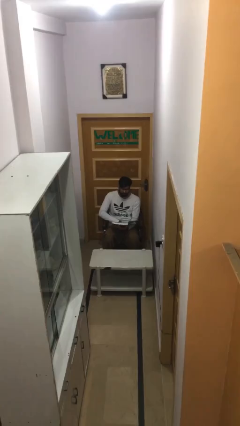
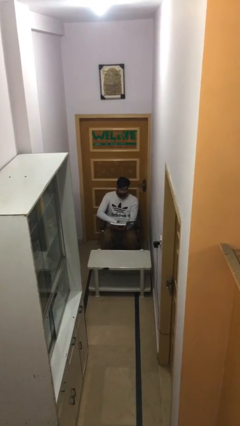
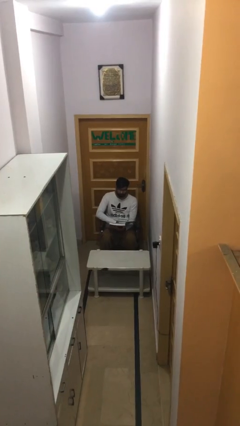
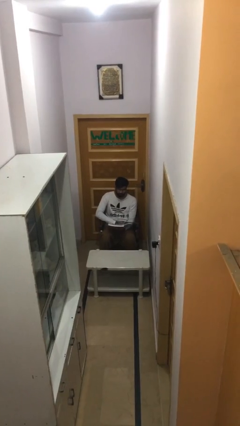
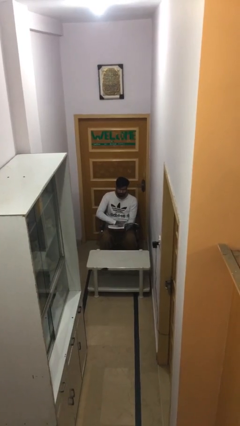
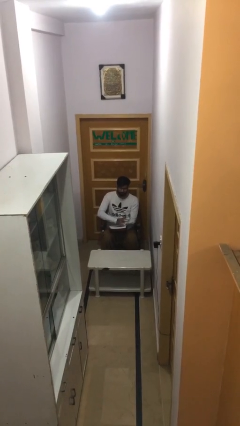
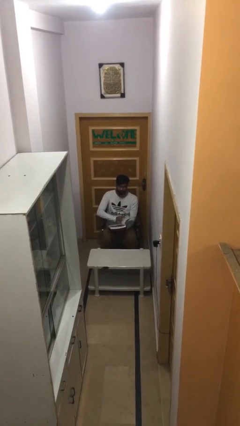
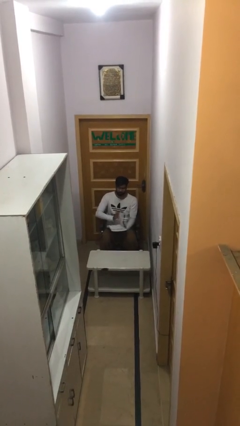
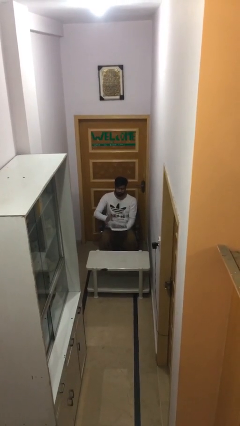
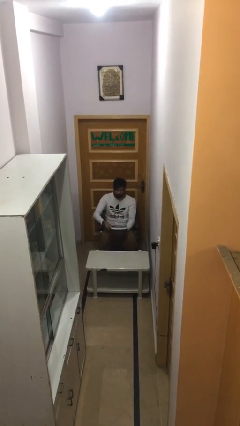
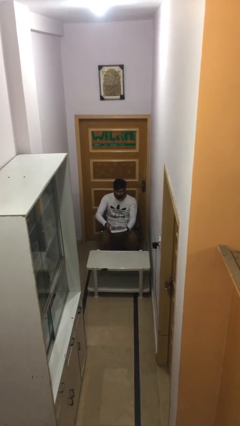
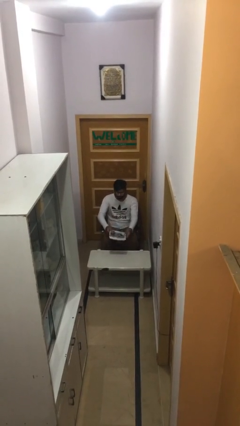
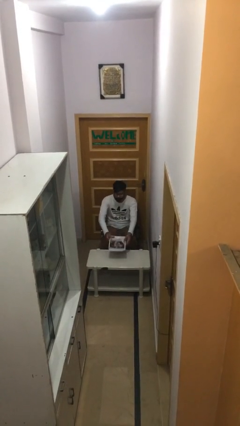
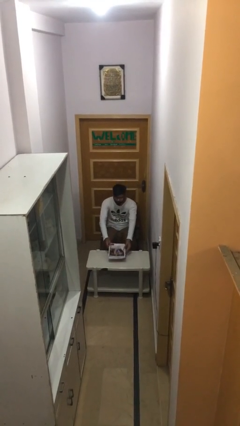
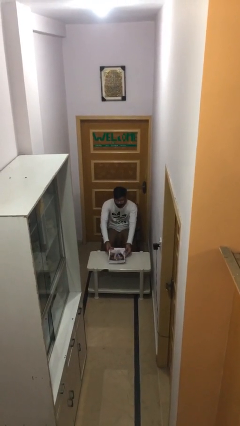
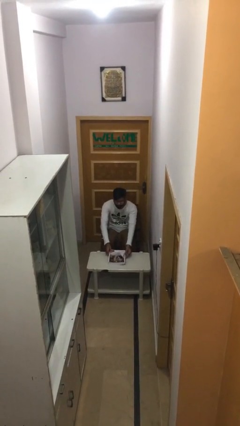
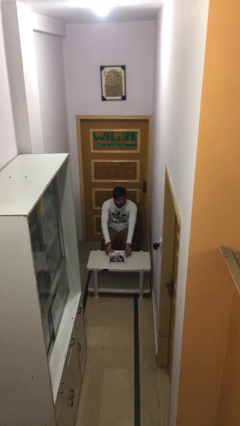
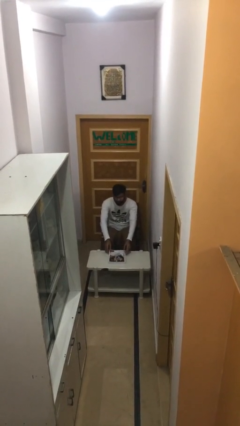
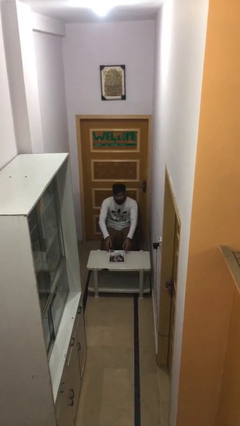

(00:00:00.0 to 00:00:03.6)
person puts down object on table

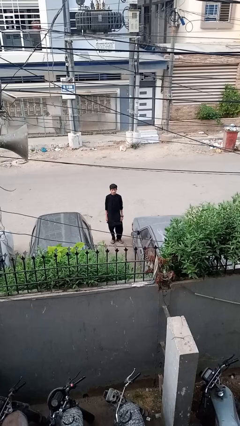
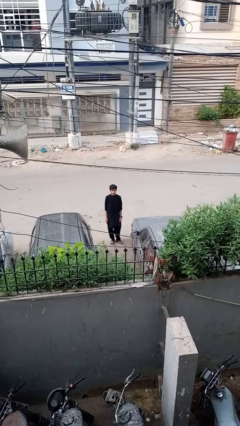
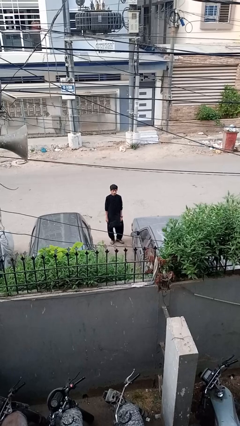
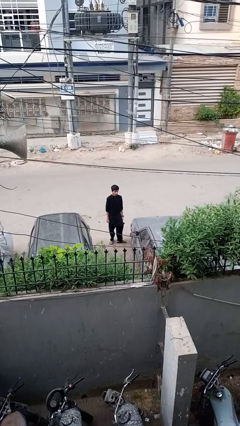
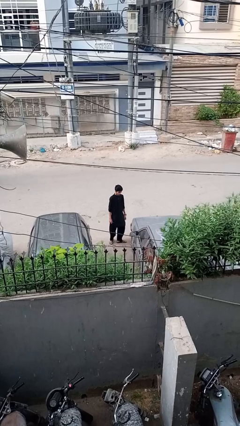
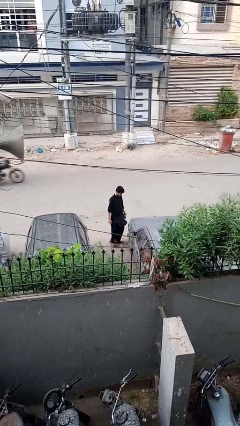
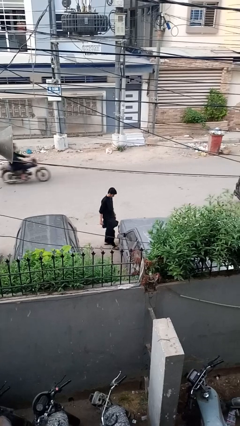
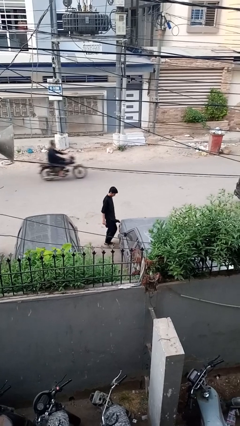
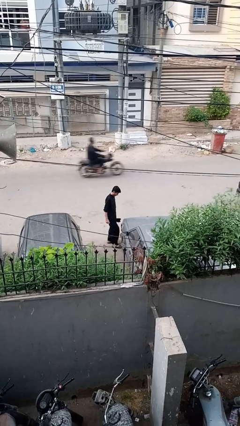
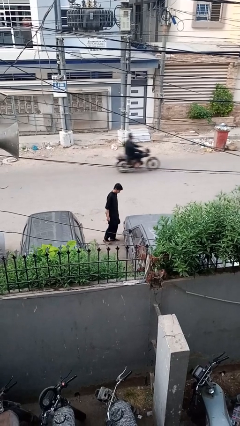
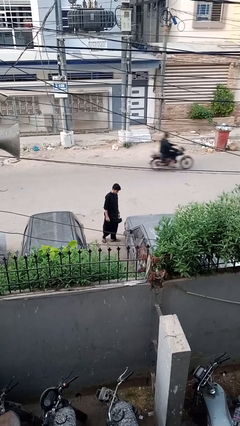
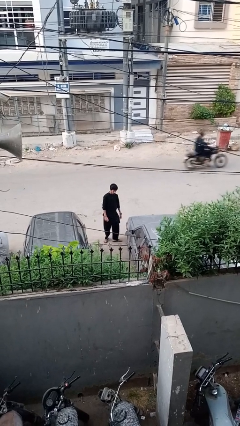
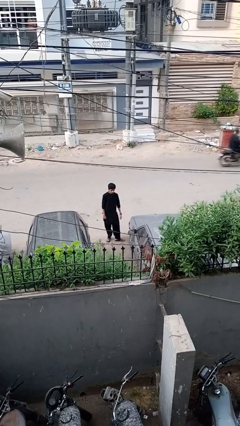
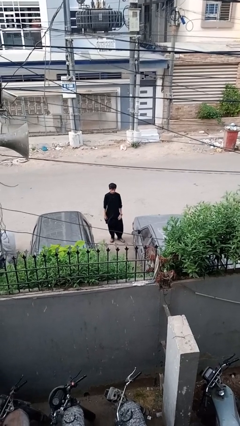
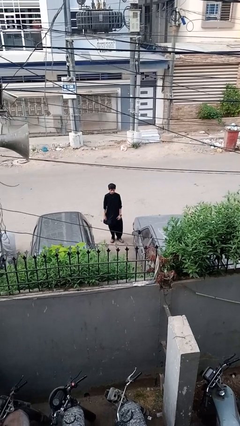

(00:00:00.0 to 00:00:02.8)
person kicks car tires

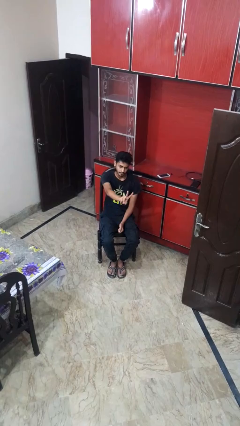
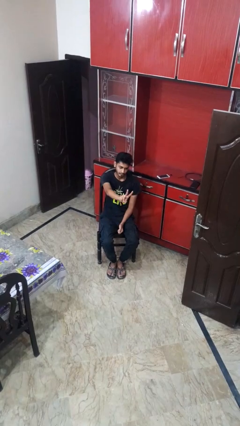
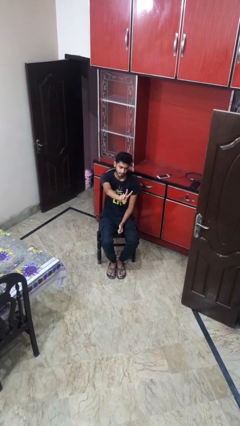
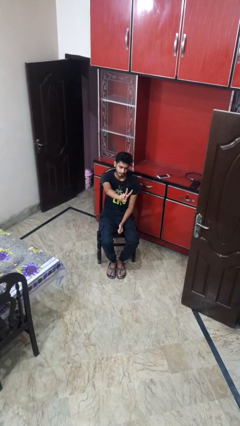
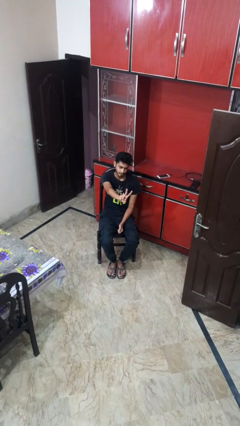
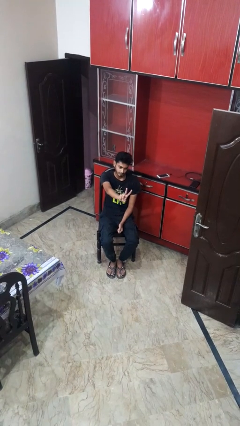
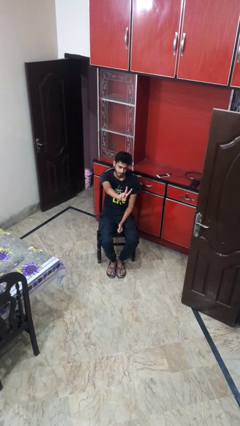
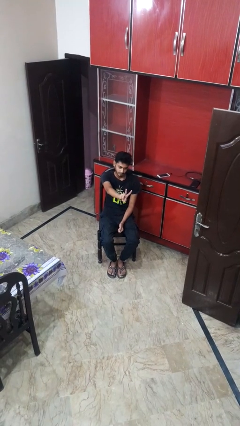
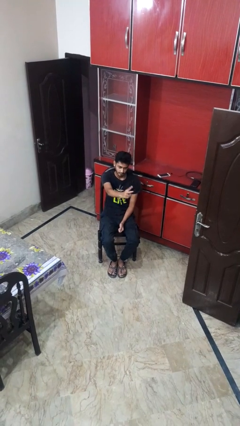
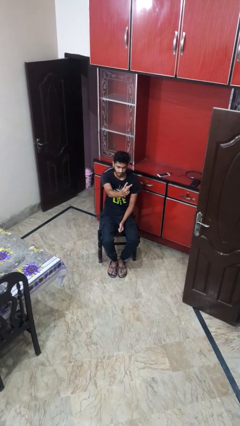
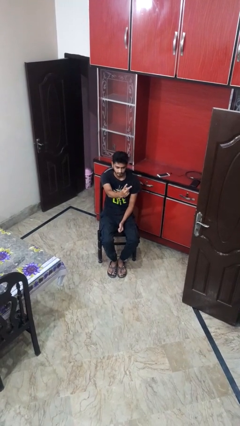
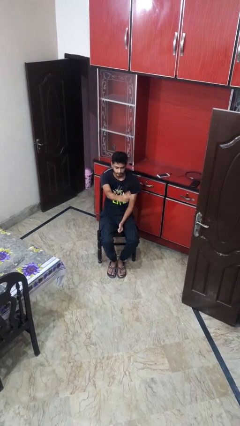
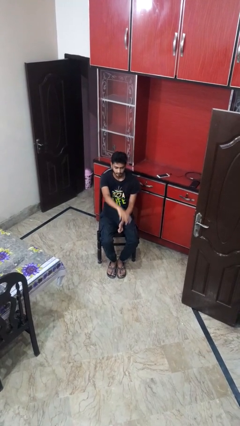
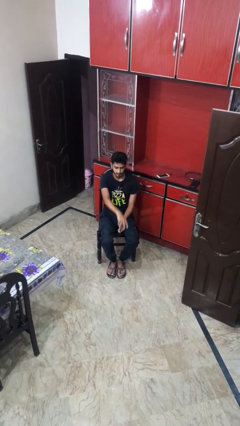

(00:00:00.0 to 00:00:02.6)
person gestures peace

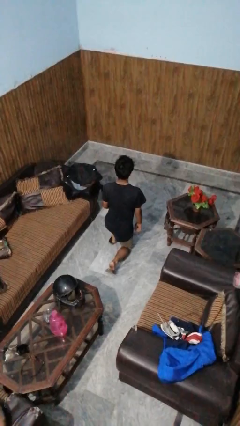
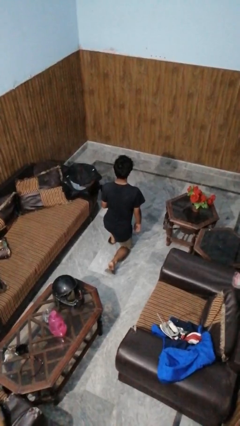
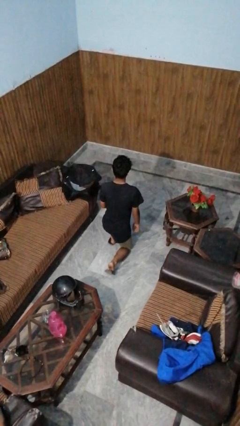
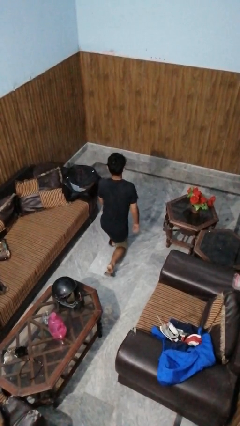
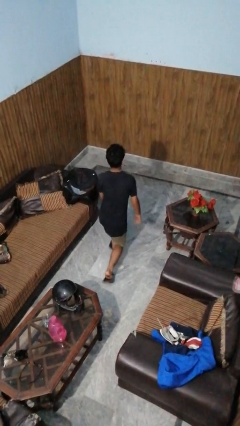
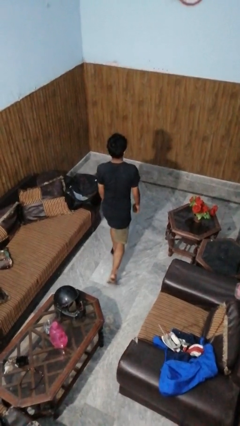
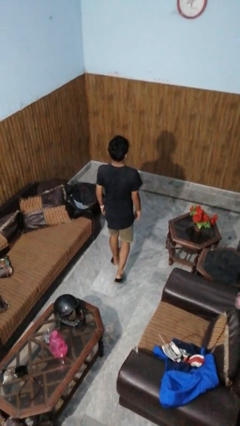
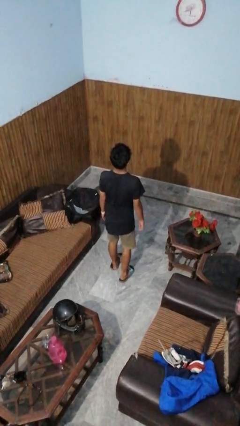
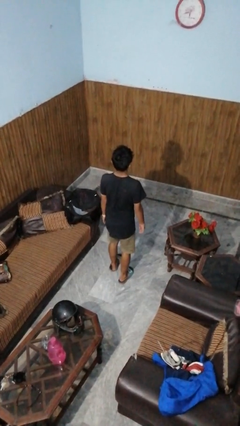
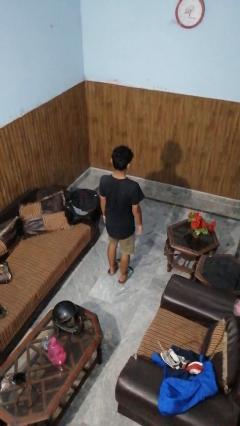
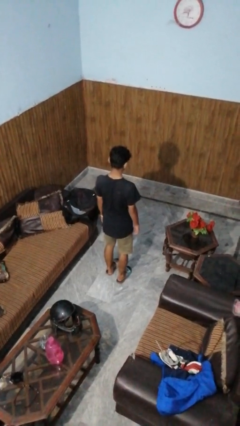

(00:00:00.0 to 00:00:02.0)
person stands up from floor

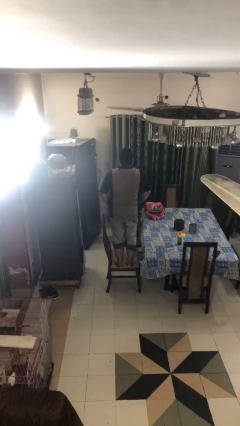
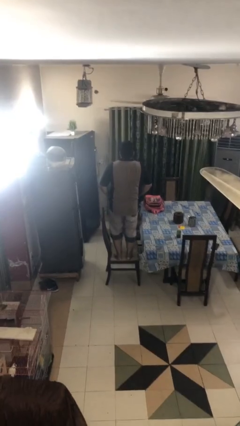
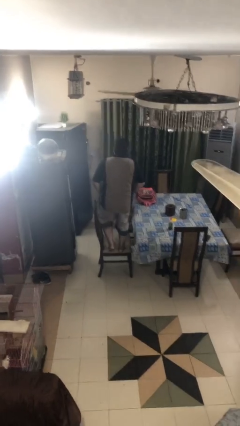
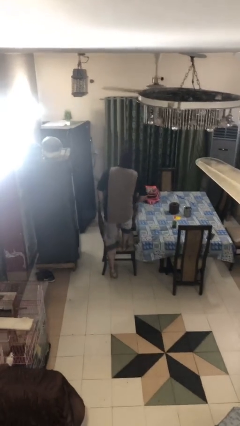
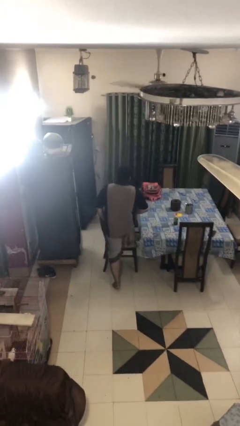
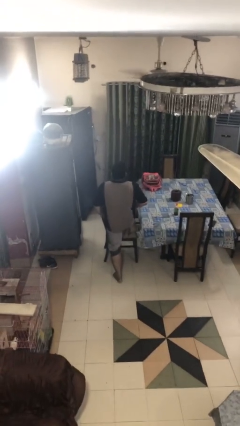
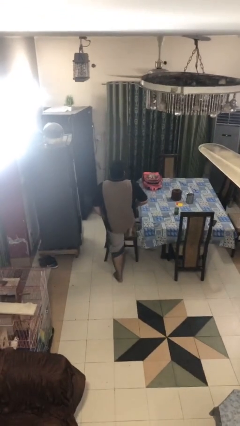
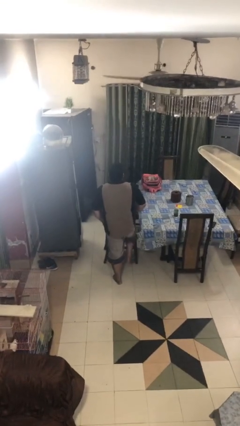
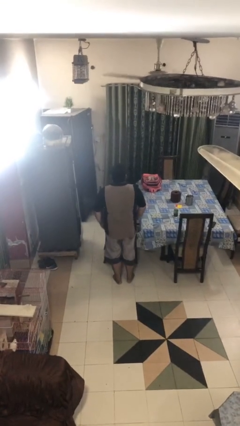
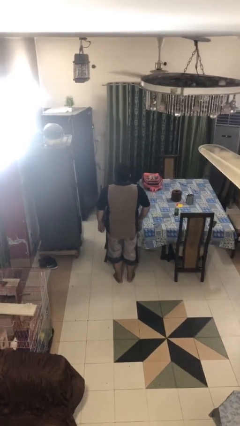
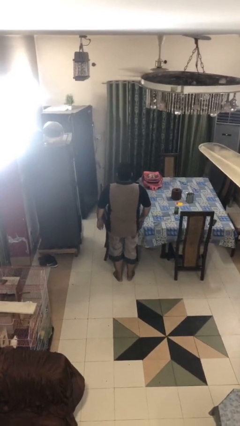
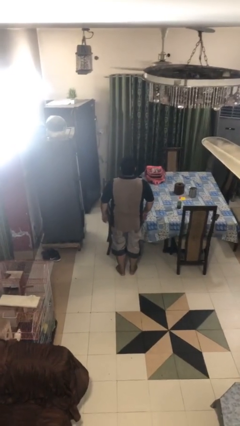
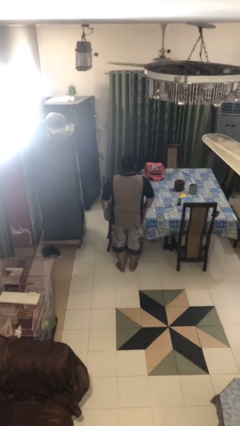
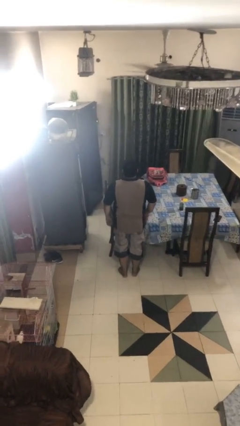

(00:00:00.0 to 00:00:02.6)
person climbs off chair

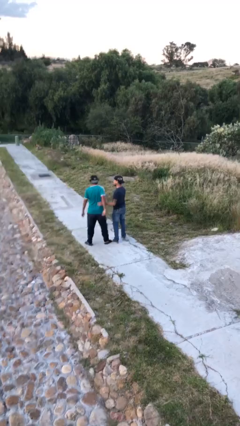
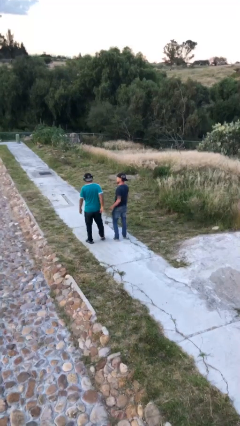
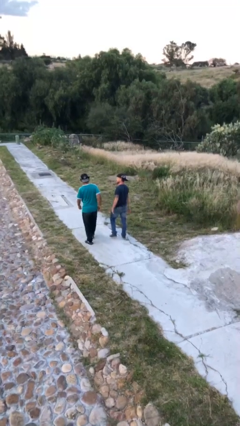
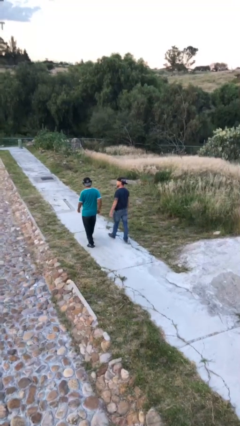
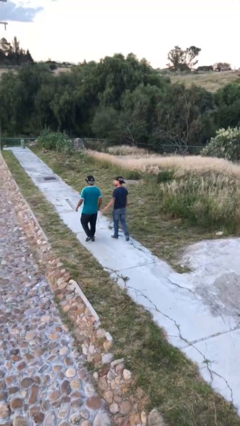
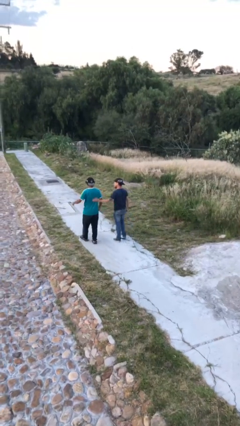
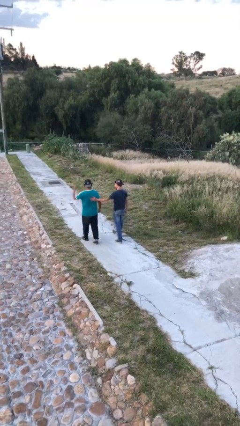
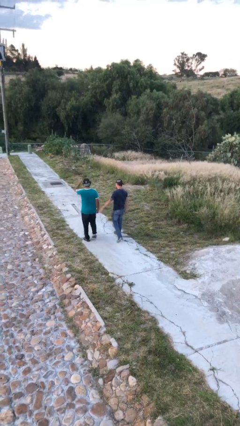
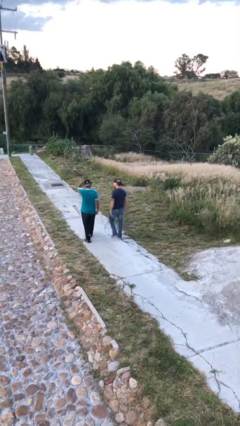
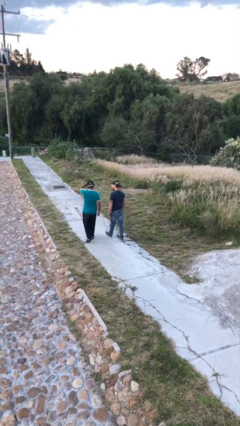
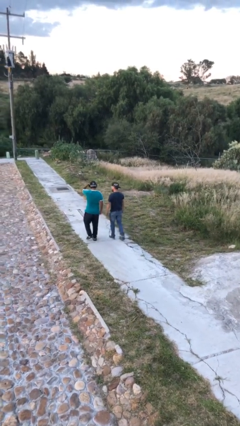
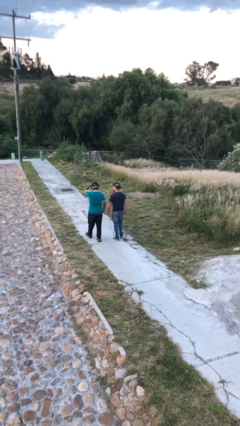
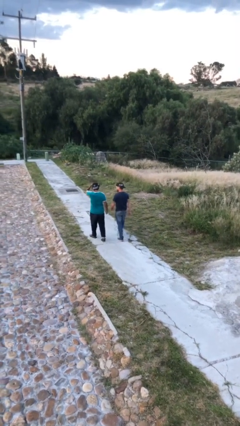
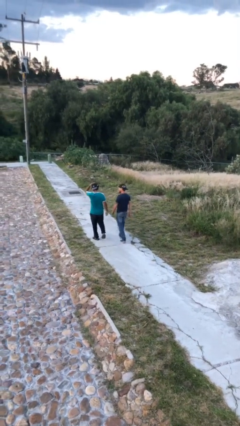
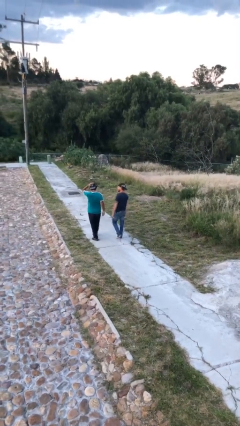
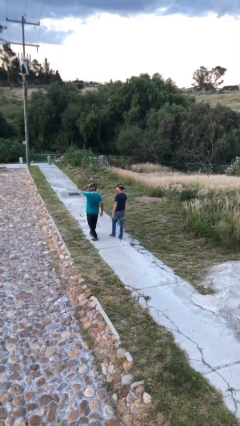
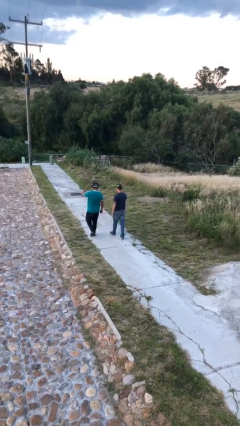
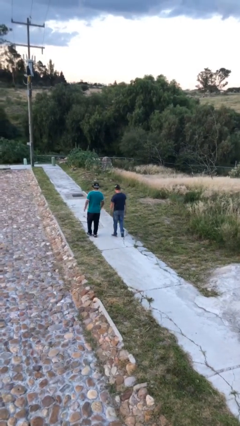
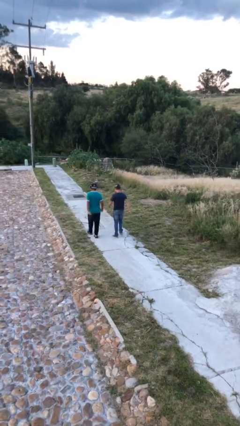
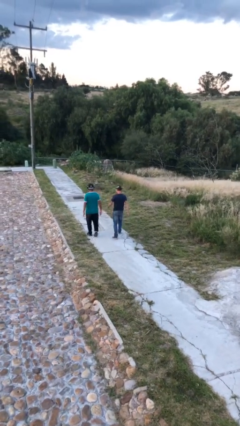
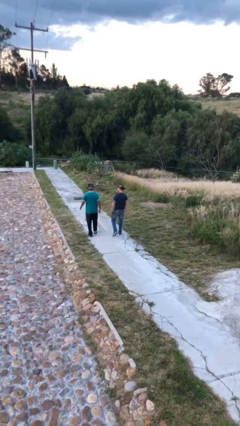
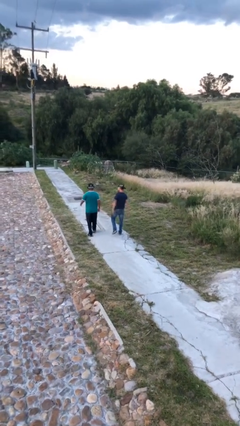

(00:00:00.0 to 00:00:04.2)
person talks to person
